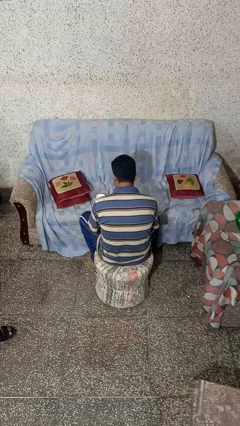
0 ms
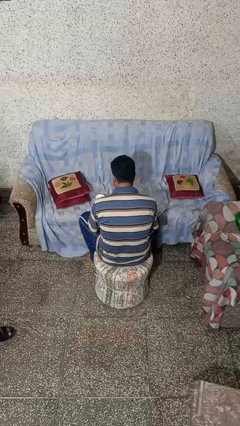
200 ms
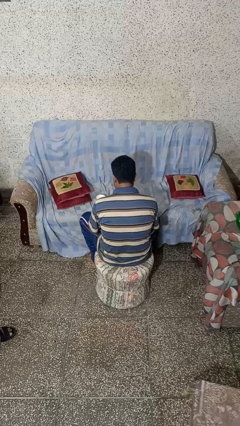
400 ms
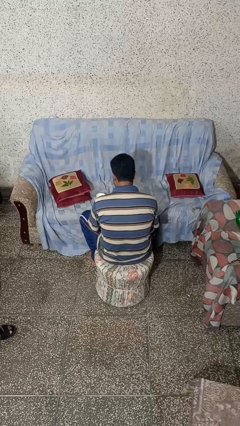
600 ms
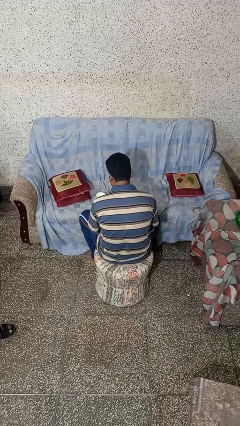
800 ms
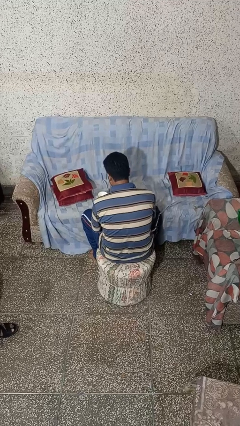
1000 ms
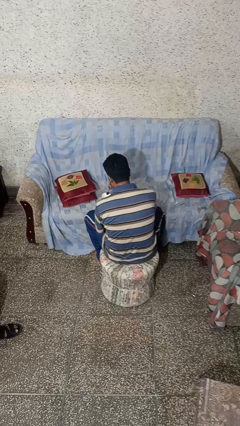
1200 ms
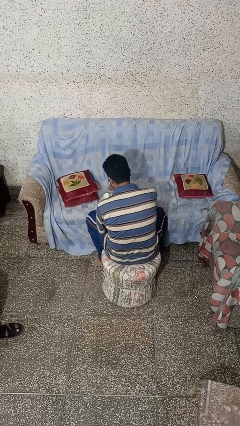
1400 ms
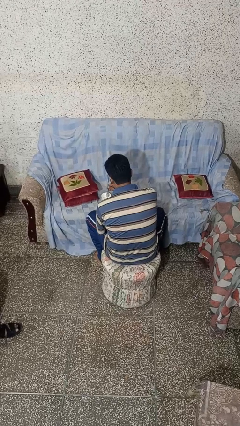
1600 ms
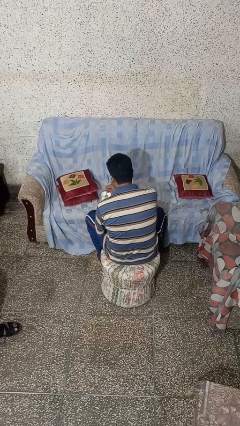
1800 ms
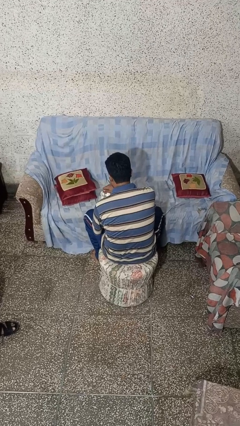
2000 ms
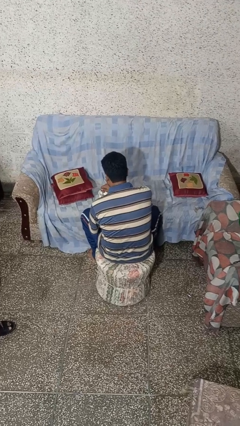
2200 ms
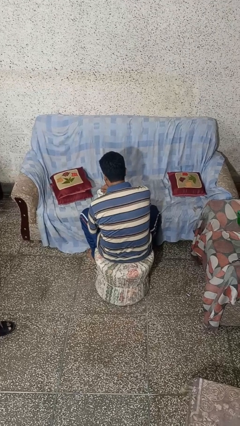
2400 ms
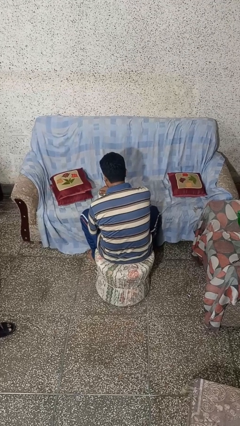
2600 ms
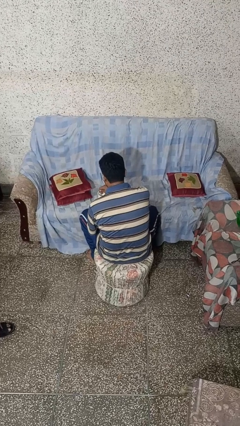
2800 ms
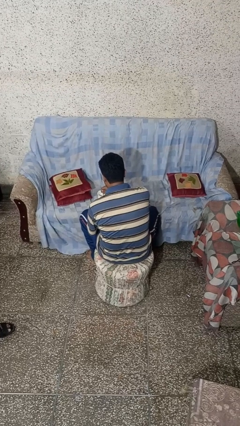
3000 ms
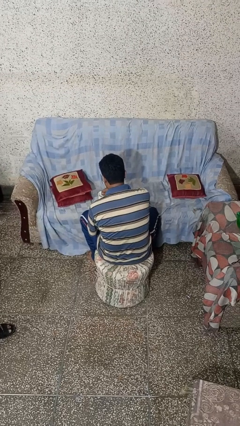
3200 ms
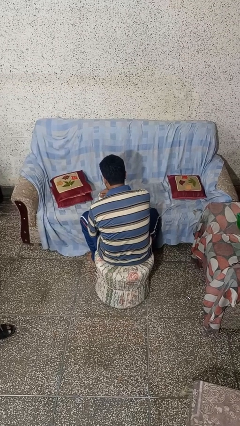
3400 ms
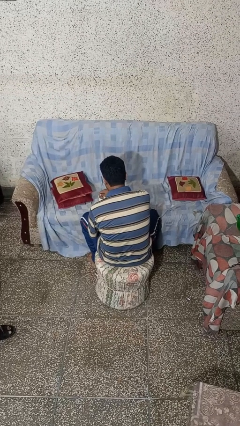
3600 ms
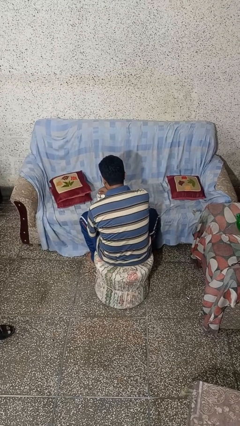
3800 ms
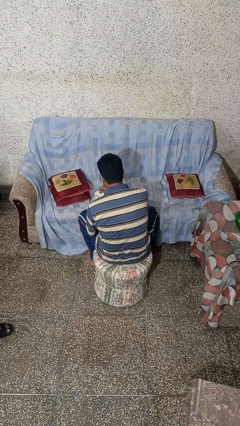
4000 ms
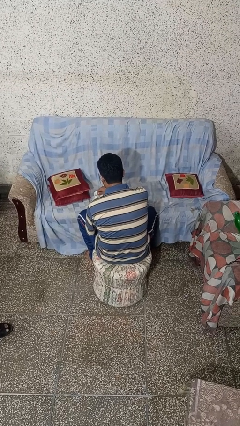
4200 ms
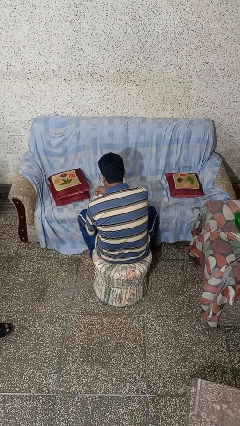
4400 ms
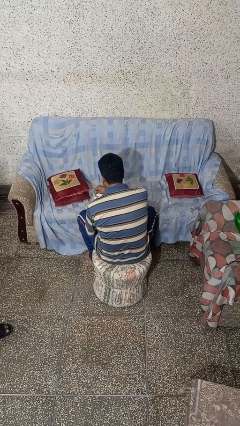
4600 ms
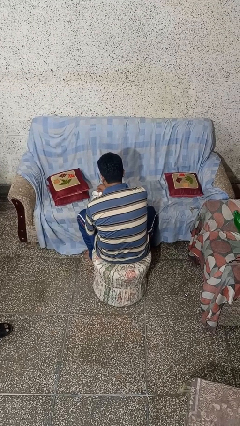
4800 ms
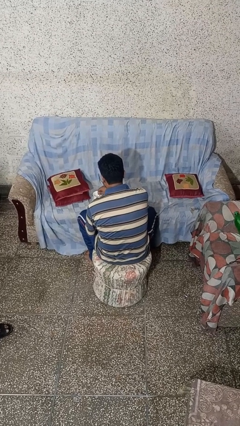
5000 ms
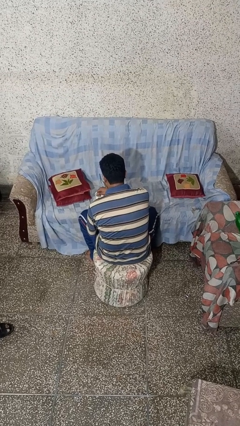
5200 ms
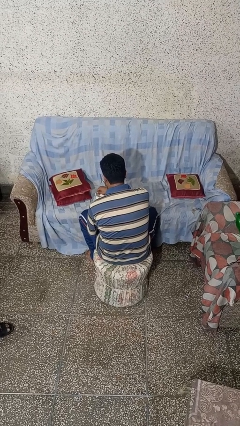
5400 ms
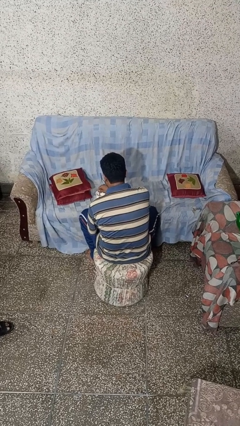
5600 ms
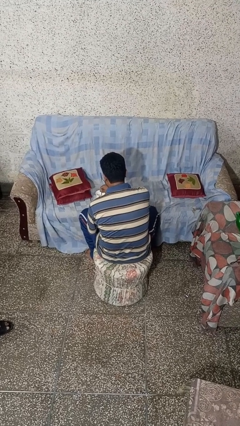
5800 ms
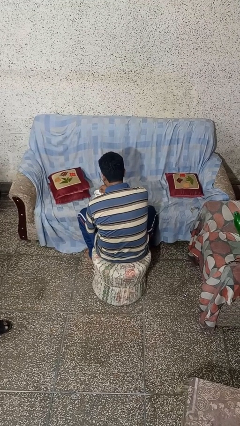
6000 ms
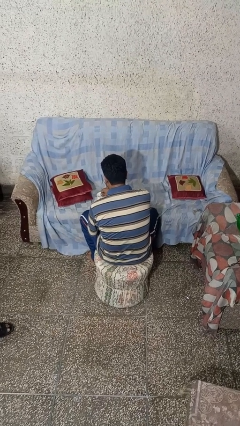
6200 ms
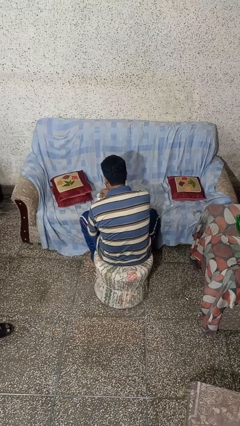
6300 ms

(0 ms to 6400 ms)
person stirs mug

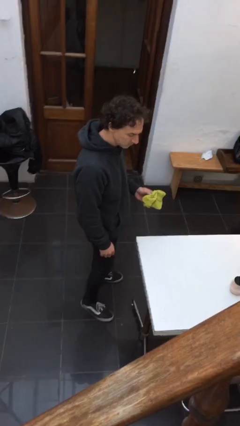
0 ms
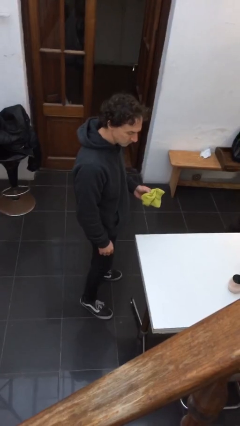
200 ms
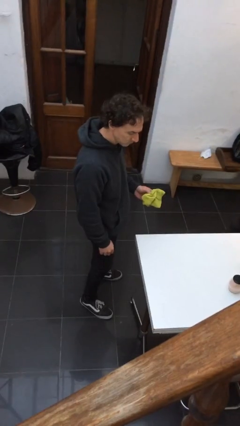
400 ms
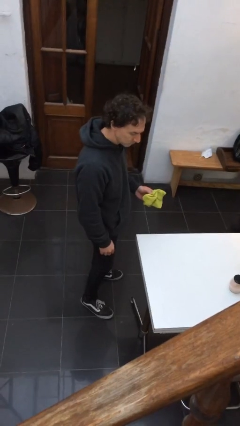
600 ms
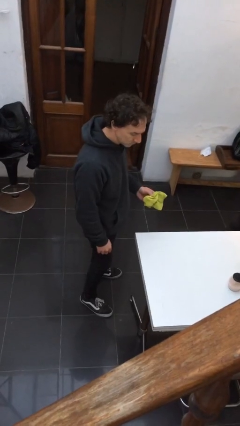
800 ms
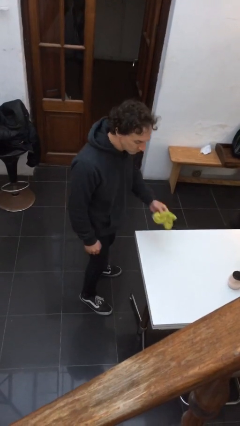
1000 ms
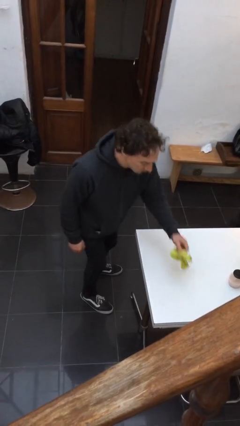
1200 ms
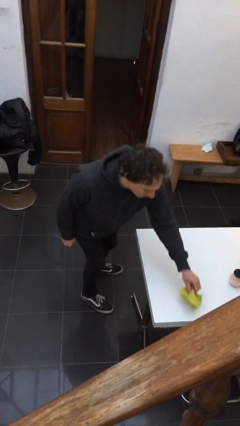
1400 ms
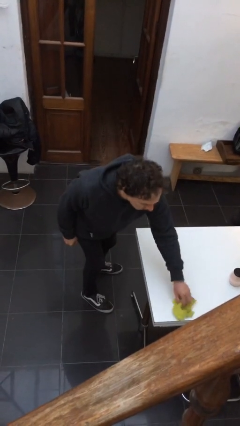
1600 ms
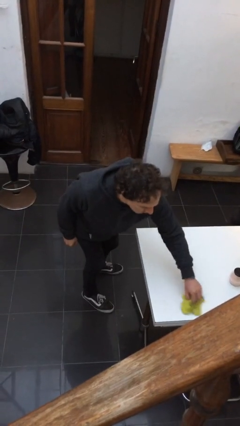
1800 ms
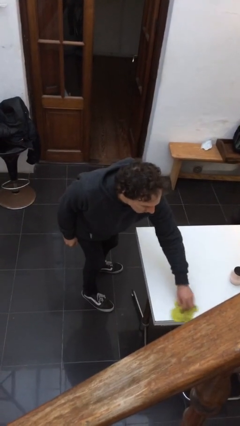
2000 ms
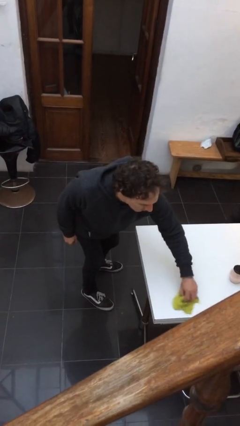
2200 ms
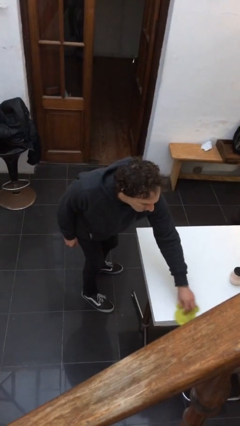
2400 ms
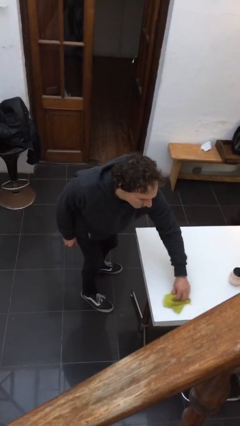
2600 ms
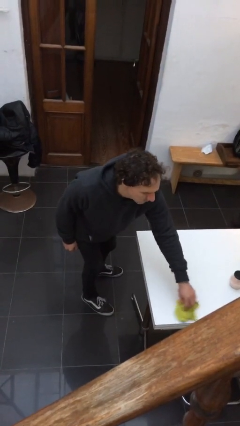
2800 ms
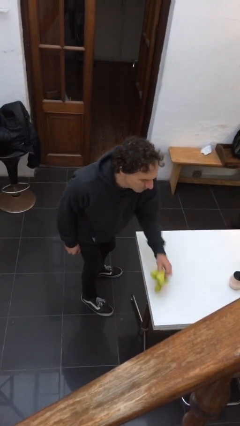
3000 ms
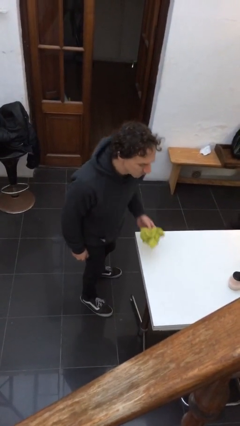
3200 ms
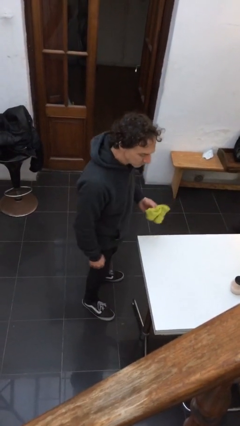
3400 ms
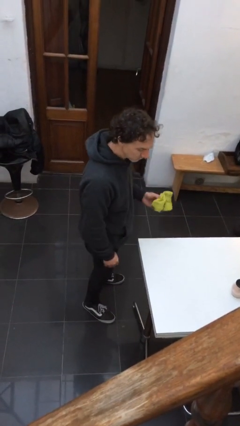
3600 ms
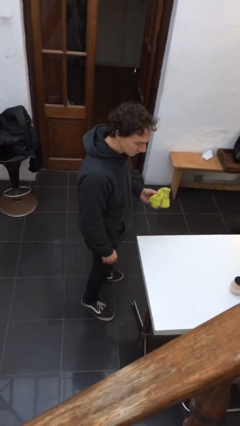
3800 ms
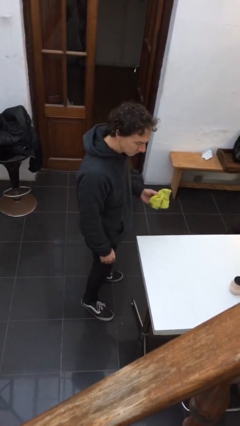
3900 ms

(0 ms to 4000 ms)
person cleans table with rag

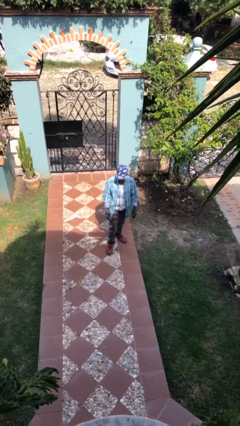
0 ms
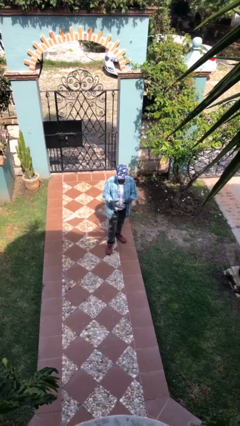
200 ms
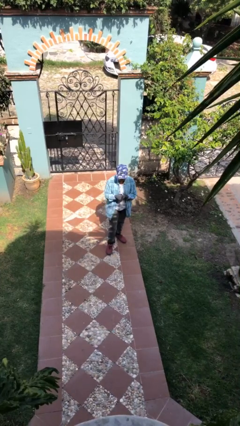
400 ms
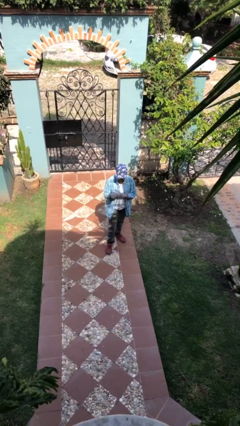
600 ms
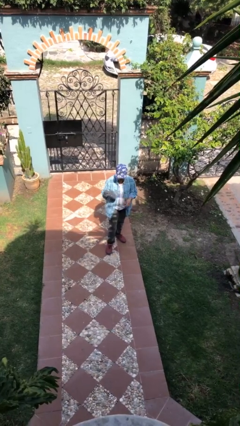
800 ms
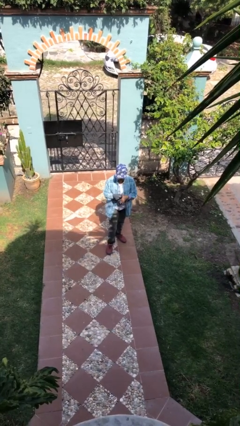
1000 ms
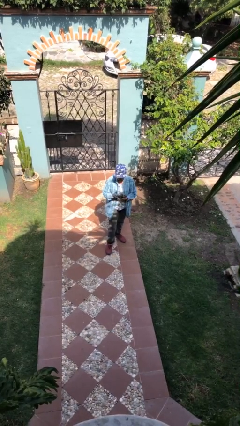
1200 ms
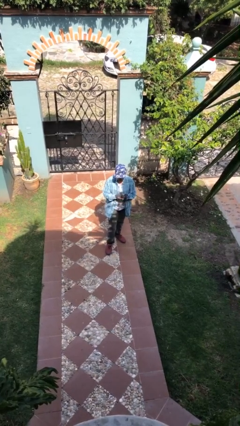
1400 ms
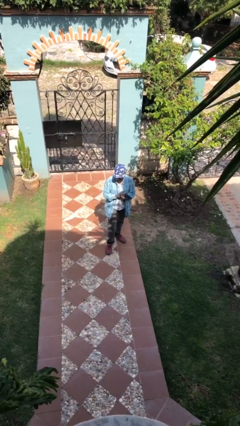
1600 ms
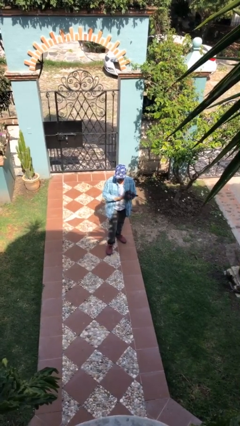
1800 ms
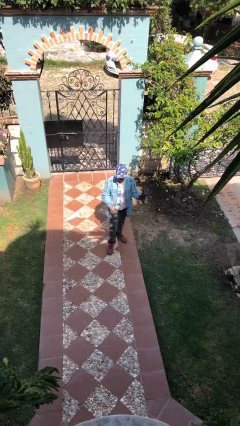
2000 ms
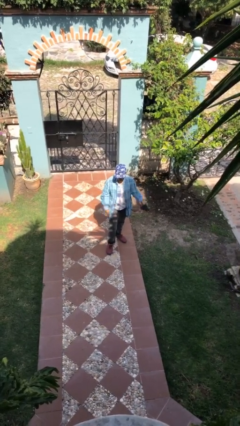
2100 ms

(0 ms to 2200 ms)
person takes off gloves

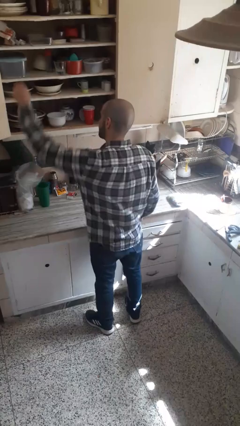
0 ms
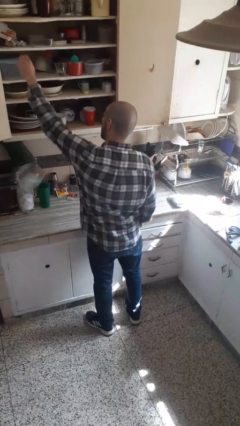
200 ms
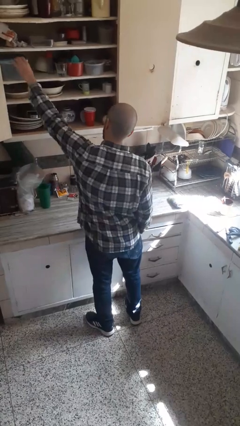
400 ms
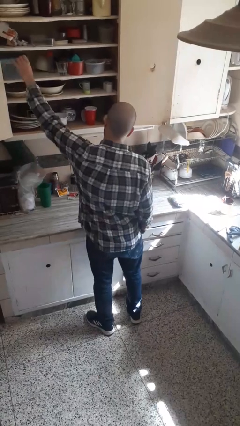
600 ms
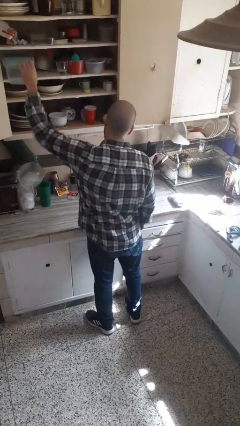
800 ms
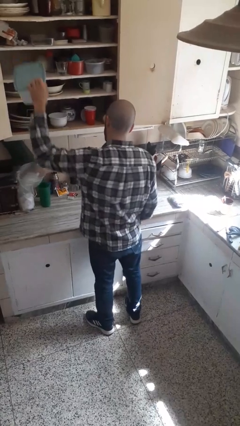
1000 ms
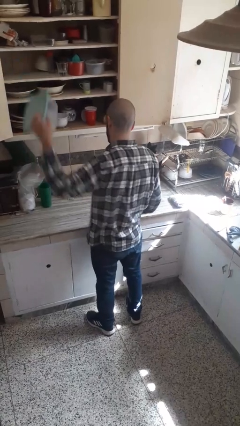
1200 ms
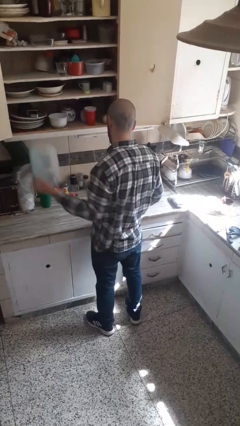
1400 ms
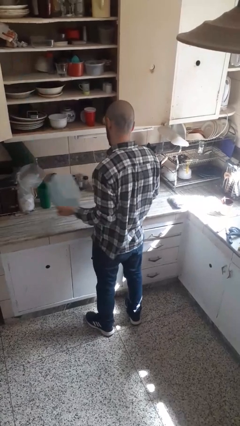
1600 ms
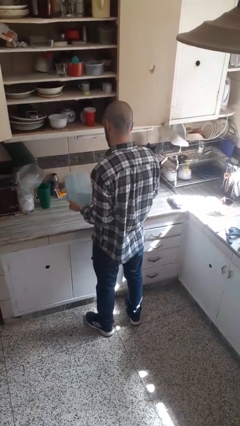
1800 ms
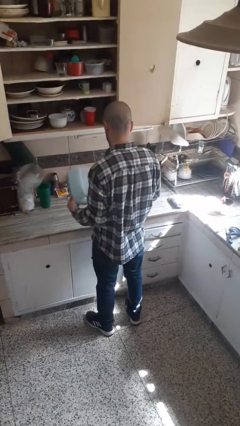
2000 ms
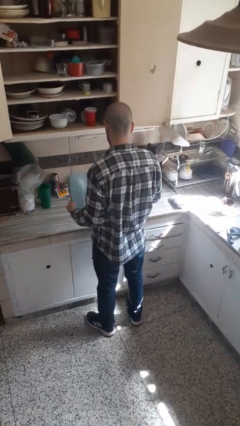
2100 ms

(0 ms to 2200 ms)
person picks up object from cabinet

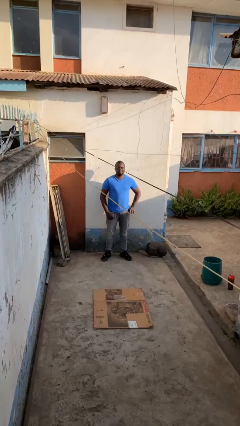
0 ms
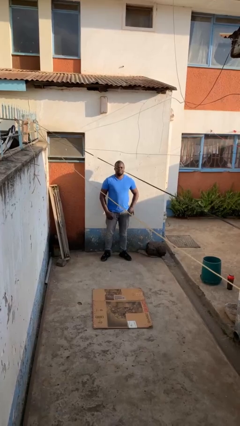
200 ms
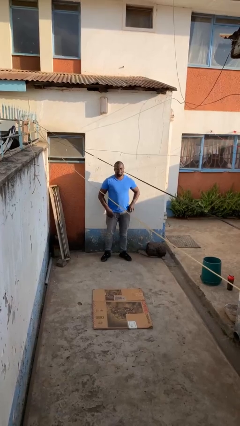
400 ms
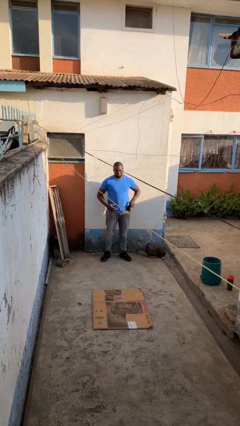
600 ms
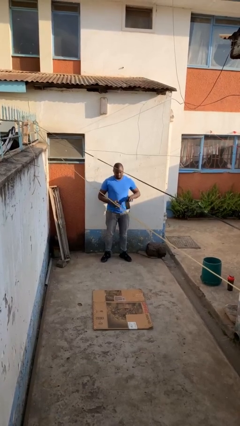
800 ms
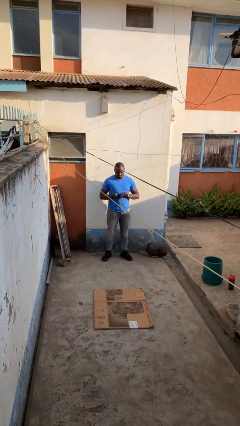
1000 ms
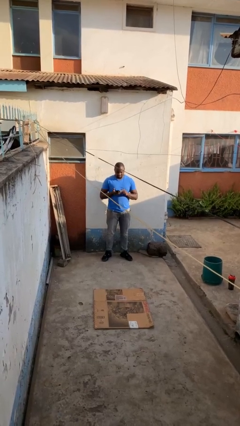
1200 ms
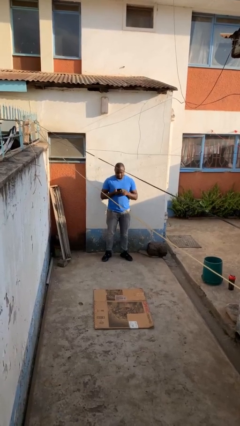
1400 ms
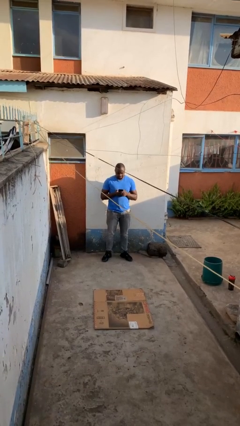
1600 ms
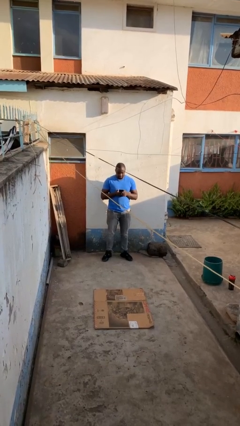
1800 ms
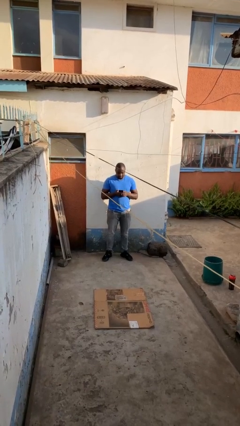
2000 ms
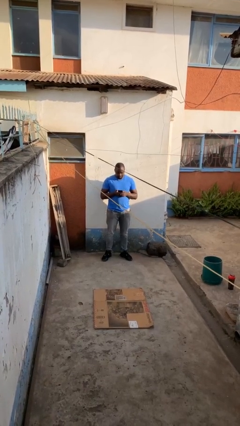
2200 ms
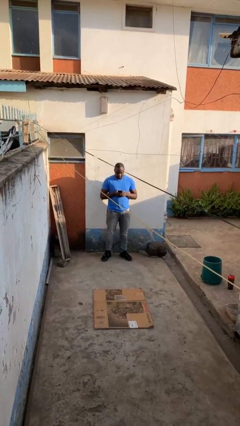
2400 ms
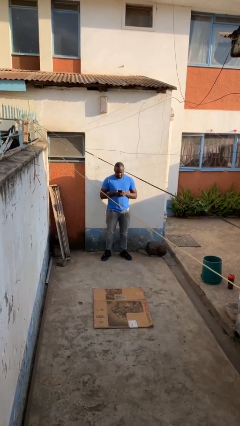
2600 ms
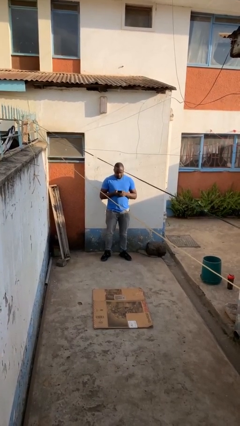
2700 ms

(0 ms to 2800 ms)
person takes phone from pocket

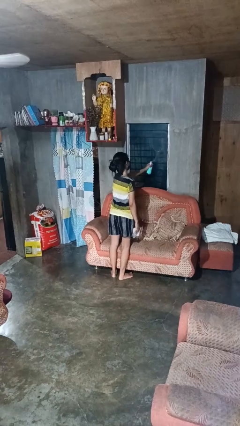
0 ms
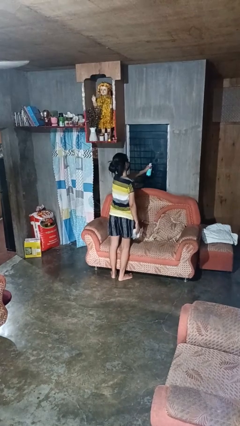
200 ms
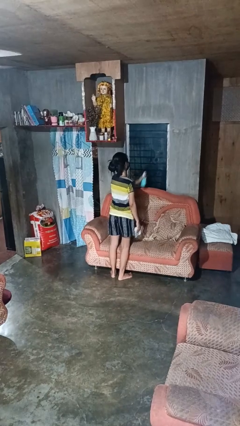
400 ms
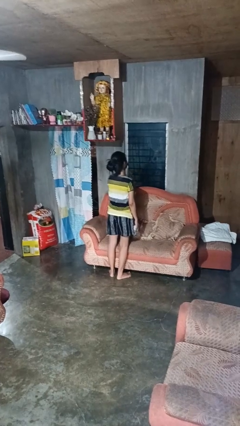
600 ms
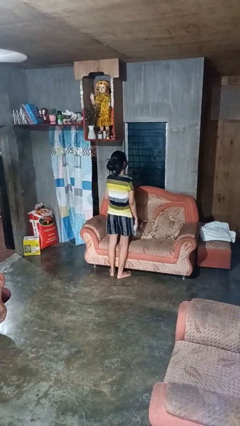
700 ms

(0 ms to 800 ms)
person sprays from bottle
